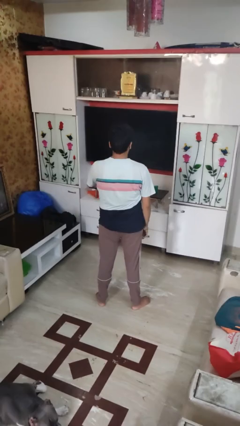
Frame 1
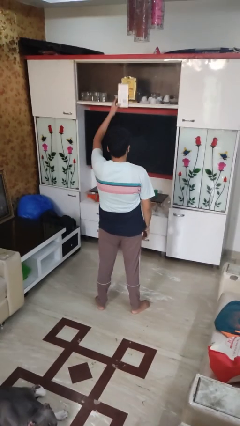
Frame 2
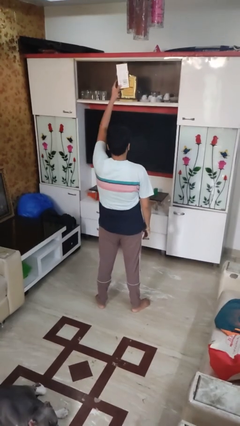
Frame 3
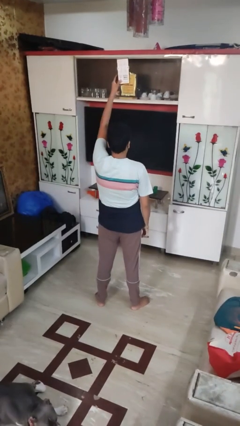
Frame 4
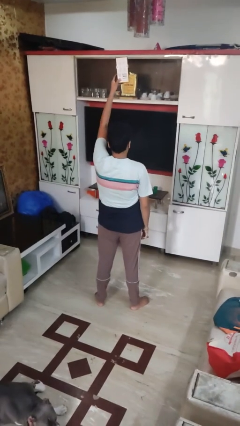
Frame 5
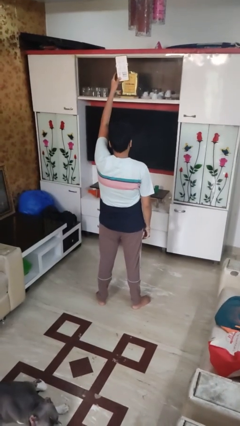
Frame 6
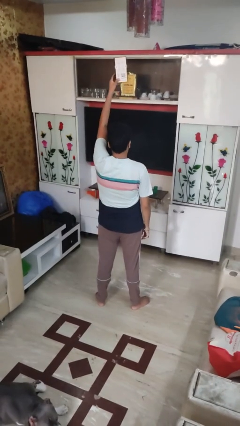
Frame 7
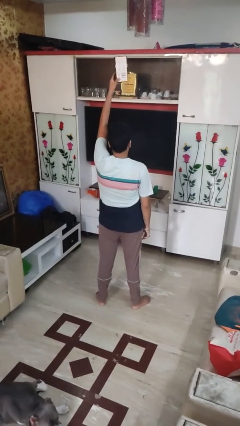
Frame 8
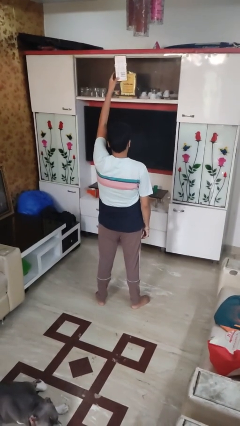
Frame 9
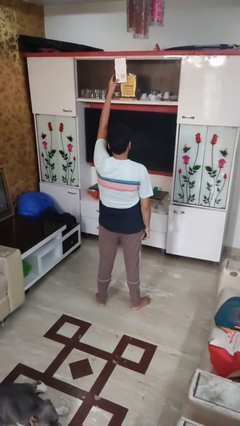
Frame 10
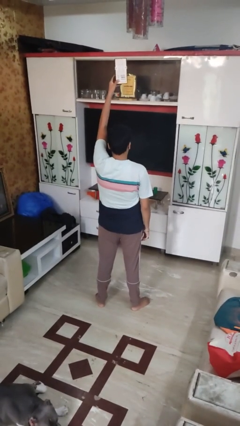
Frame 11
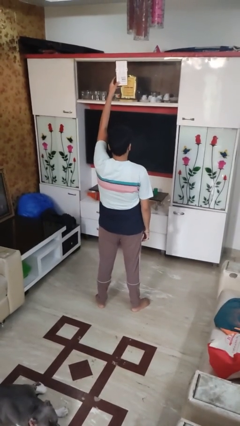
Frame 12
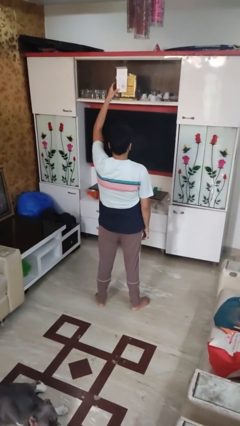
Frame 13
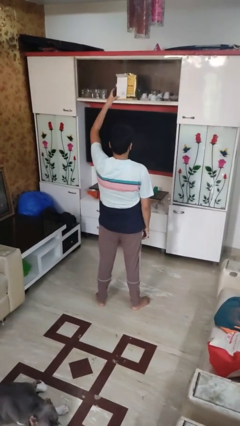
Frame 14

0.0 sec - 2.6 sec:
person holds object above head

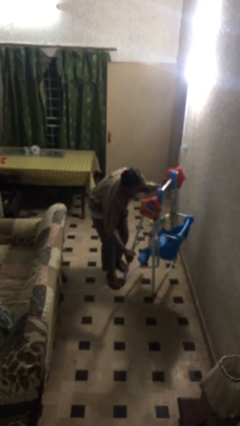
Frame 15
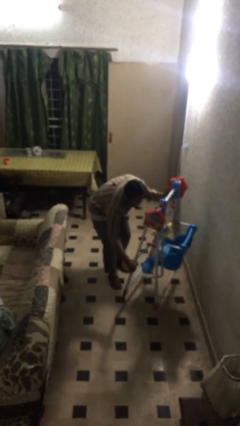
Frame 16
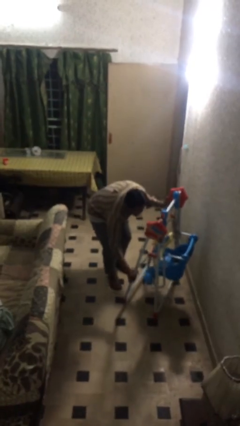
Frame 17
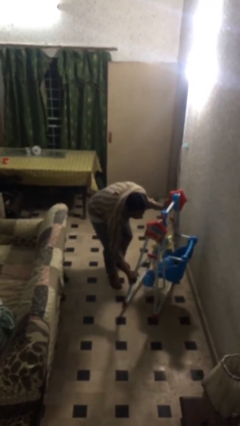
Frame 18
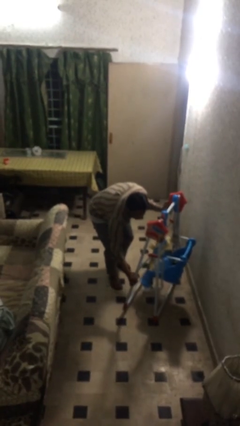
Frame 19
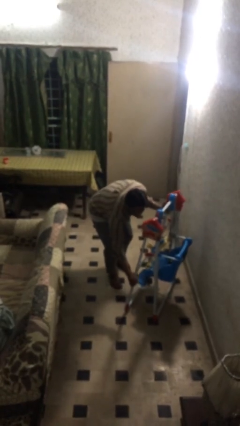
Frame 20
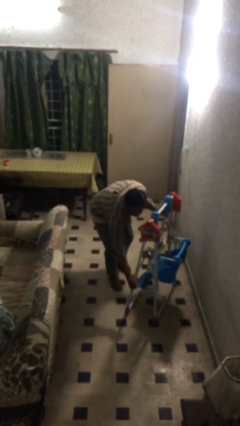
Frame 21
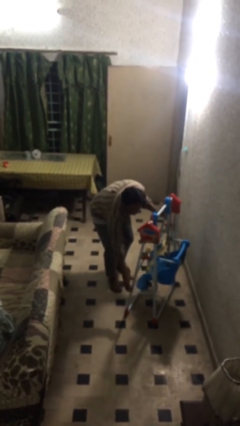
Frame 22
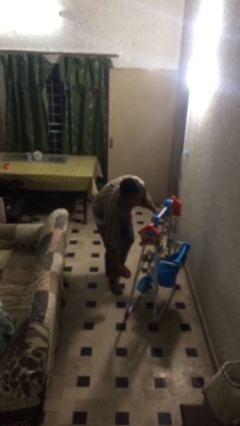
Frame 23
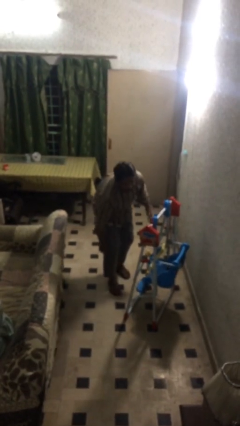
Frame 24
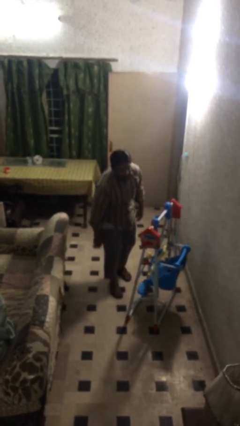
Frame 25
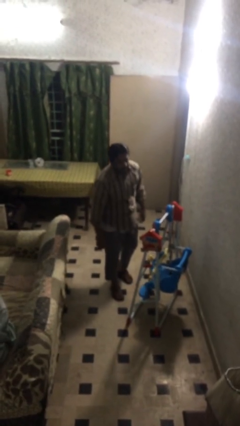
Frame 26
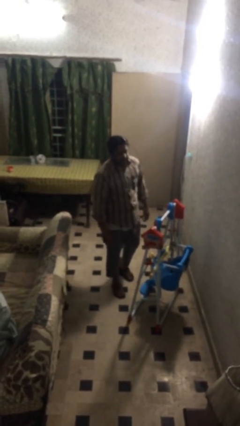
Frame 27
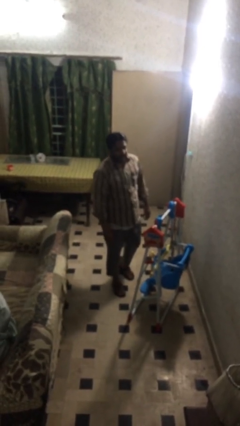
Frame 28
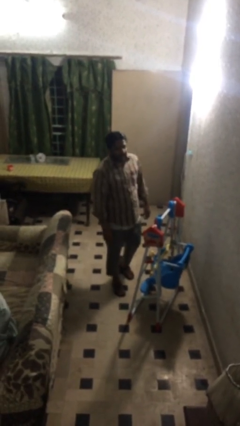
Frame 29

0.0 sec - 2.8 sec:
person puts down object on floor

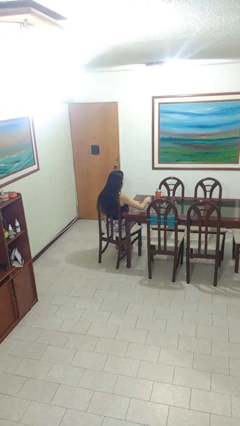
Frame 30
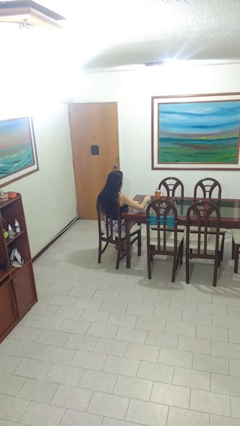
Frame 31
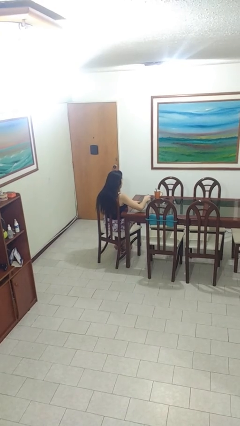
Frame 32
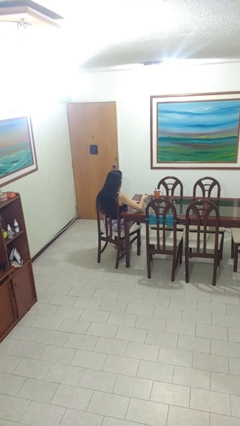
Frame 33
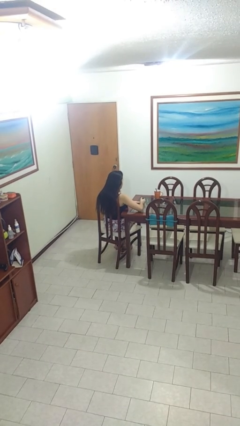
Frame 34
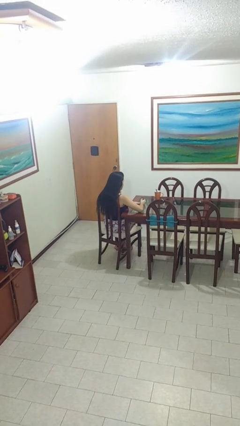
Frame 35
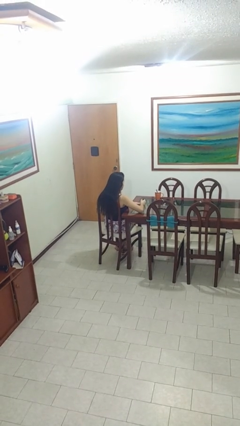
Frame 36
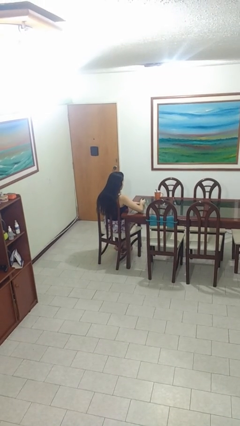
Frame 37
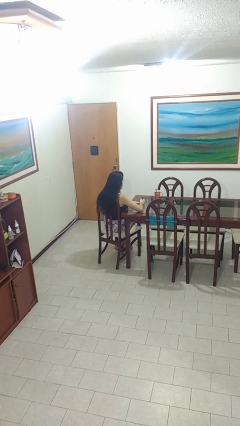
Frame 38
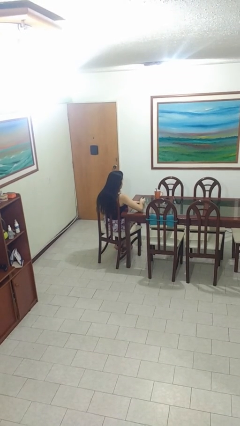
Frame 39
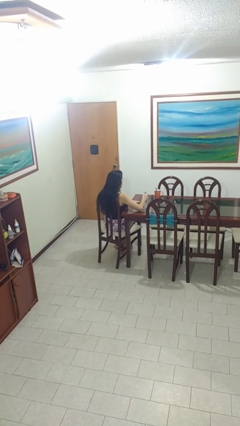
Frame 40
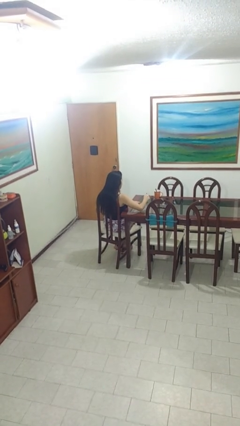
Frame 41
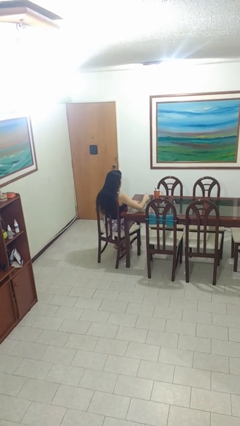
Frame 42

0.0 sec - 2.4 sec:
person paints fingernails

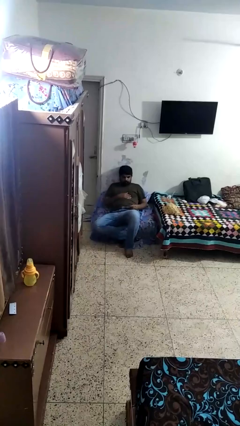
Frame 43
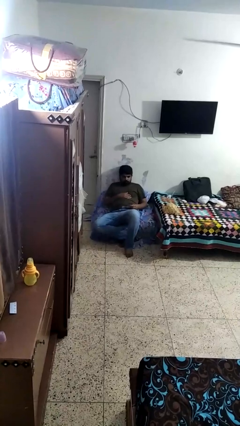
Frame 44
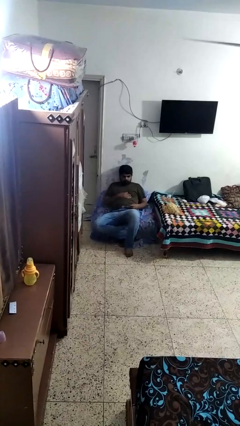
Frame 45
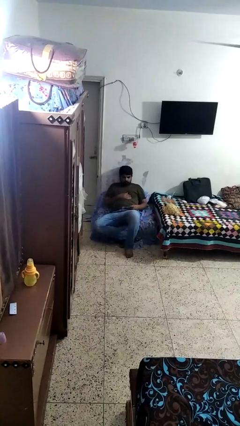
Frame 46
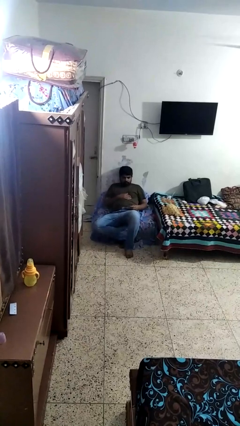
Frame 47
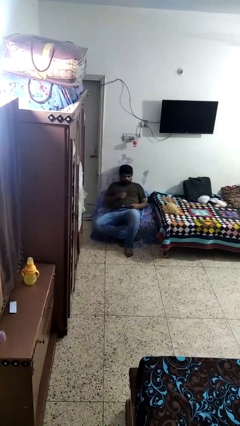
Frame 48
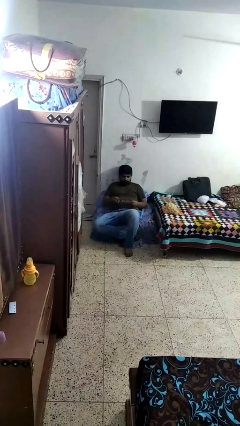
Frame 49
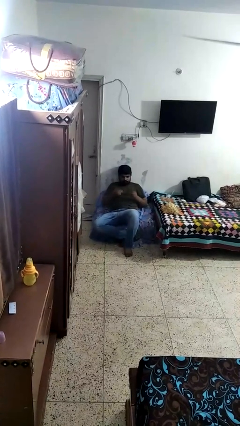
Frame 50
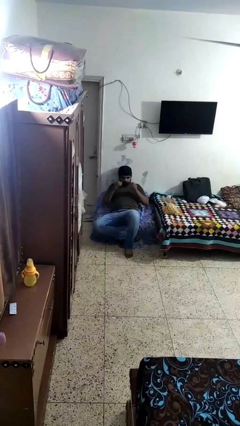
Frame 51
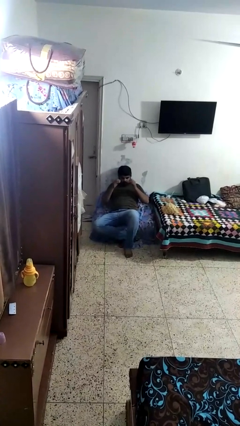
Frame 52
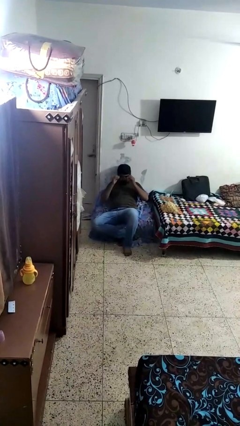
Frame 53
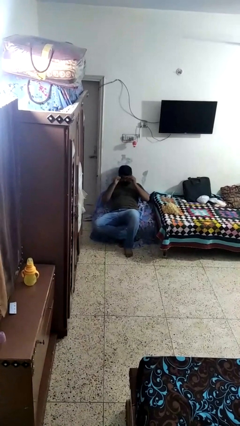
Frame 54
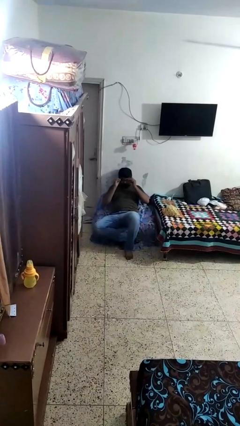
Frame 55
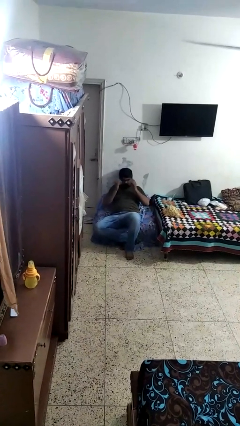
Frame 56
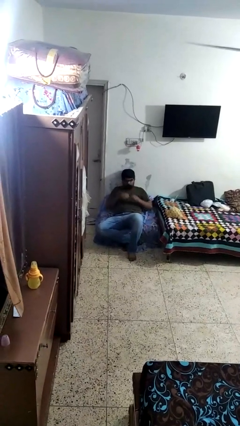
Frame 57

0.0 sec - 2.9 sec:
person puts on glasses

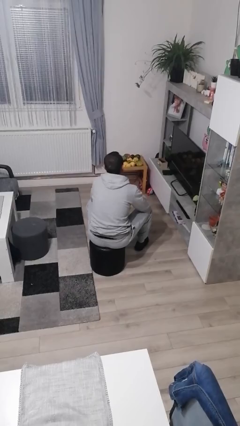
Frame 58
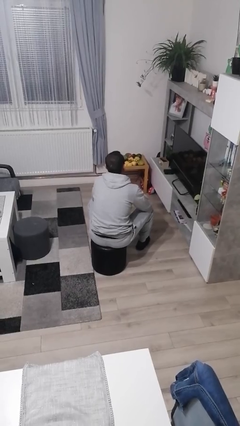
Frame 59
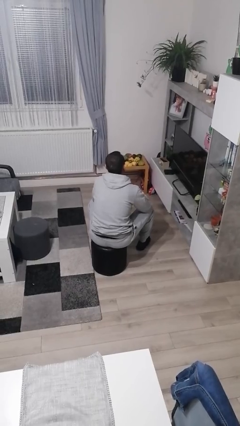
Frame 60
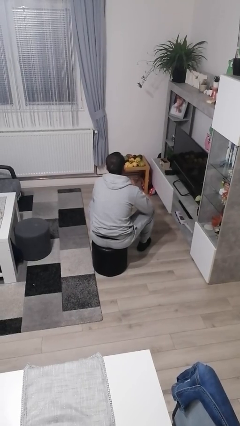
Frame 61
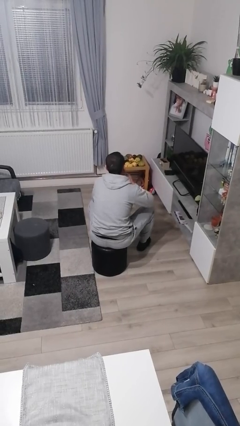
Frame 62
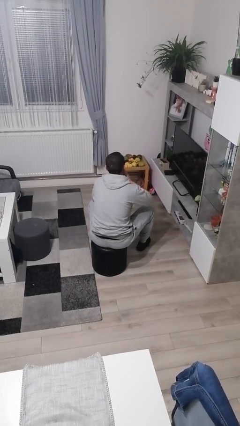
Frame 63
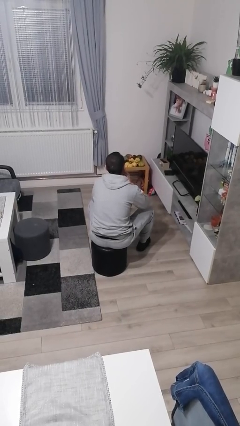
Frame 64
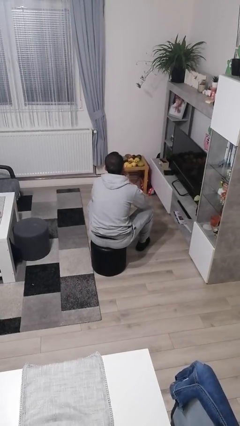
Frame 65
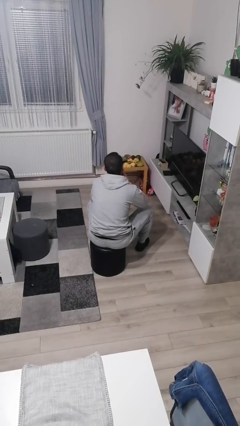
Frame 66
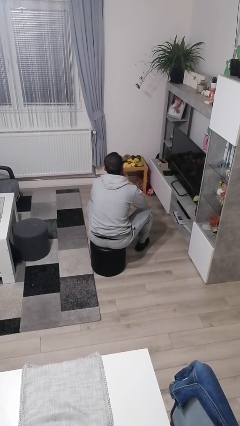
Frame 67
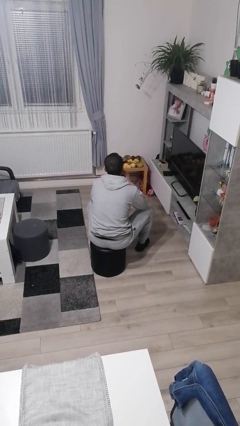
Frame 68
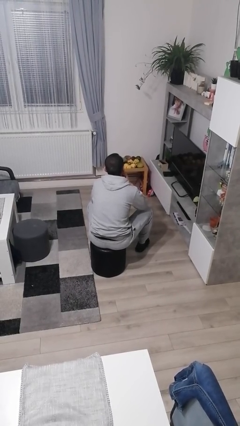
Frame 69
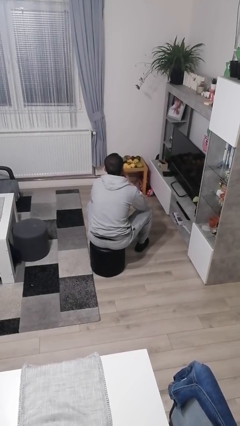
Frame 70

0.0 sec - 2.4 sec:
person strokes chin

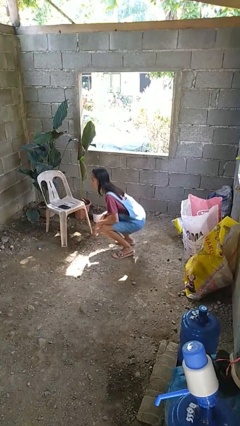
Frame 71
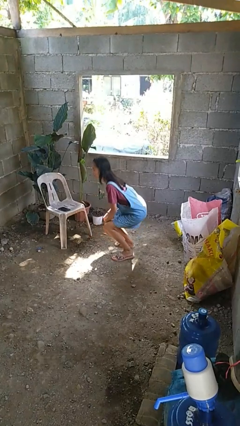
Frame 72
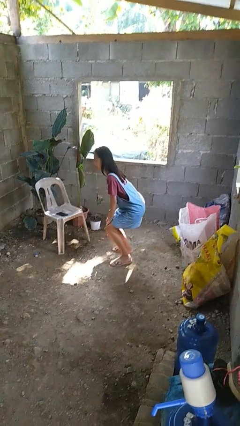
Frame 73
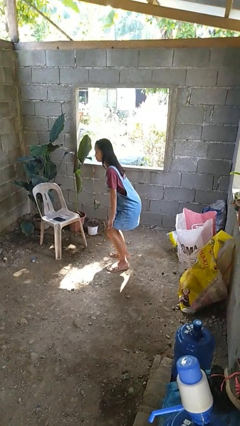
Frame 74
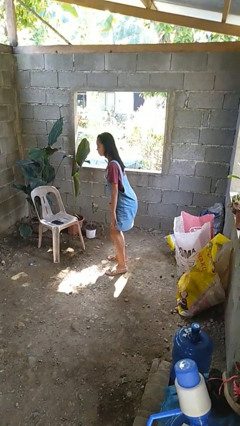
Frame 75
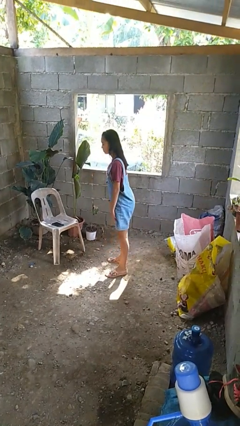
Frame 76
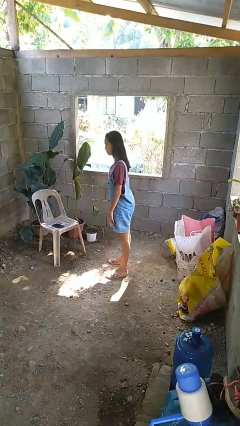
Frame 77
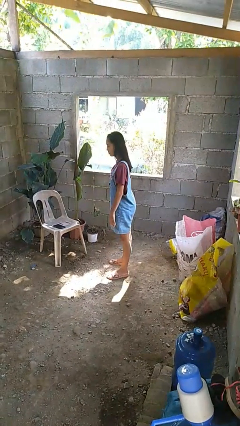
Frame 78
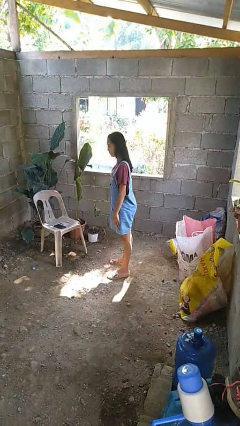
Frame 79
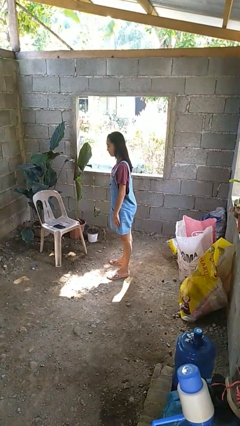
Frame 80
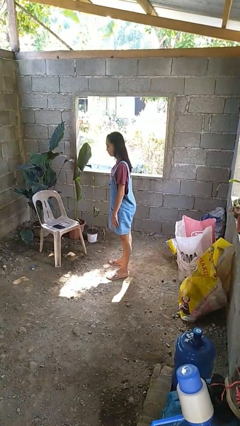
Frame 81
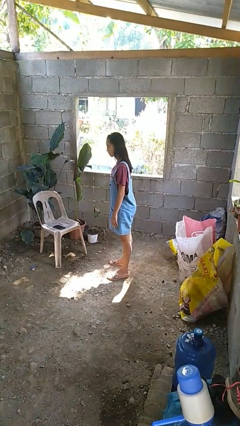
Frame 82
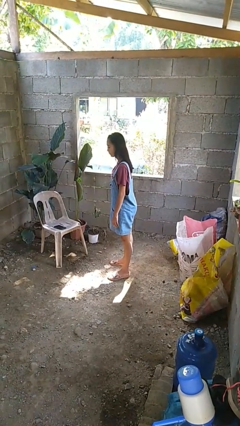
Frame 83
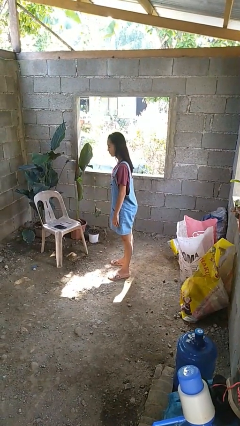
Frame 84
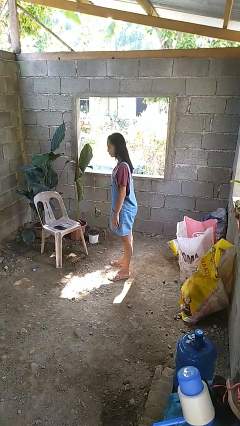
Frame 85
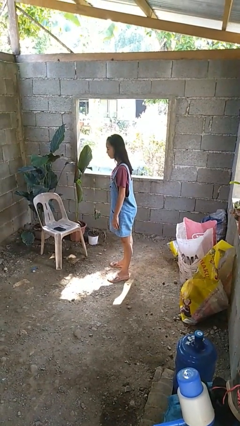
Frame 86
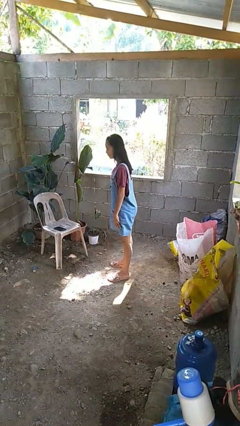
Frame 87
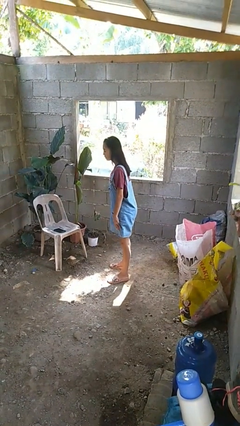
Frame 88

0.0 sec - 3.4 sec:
person stands up

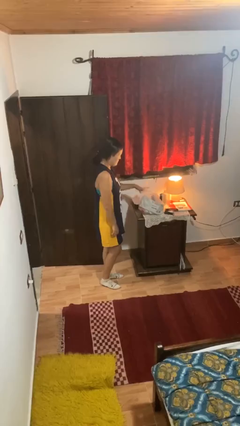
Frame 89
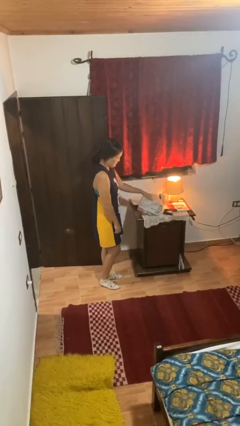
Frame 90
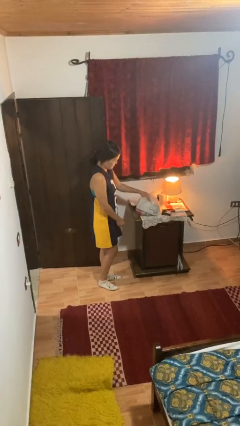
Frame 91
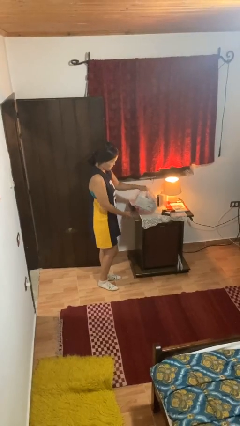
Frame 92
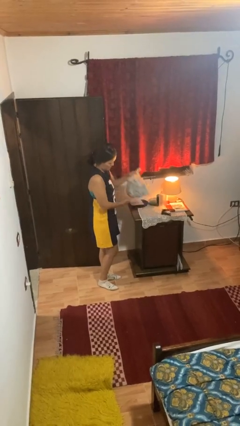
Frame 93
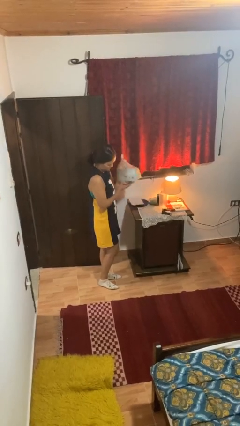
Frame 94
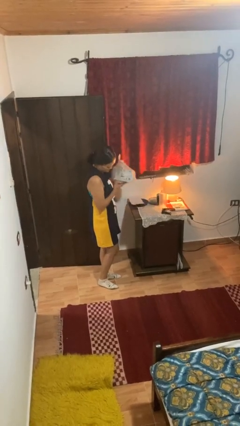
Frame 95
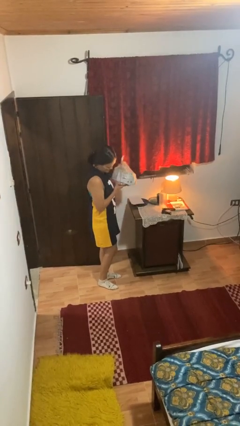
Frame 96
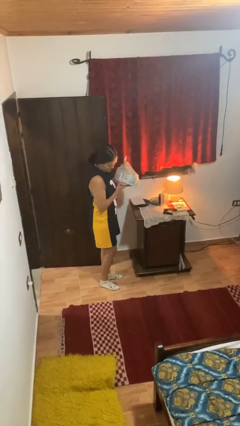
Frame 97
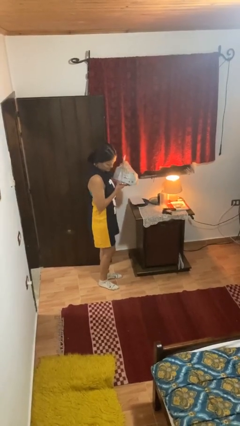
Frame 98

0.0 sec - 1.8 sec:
person picks up object from countertop
